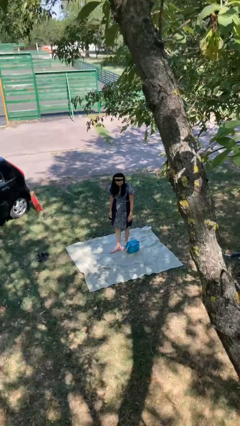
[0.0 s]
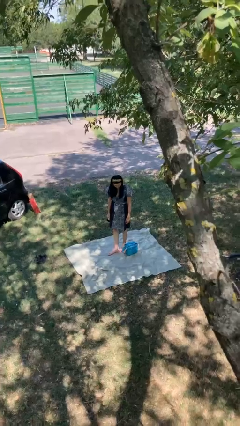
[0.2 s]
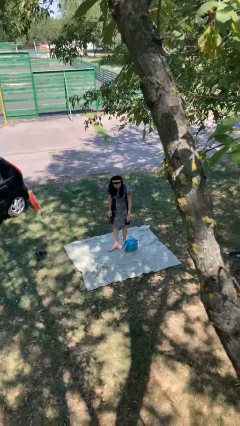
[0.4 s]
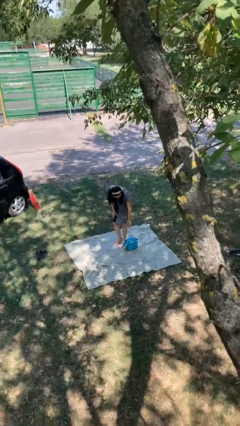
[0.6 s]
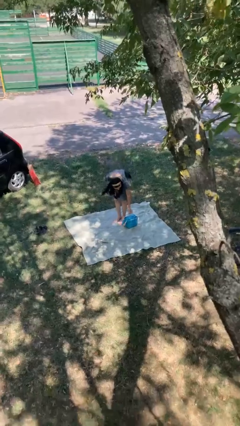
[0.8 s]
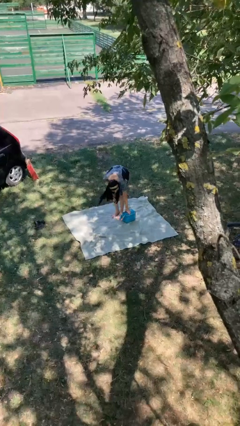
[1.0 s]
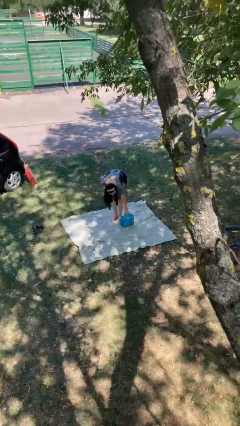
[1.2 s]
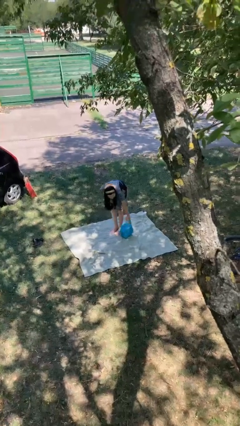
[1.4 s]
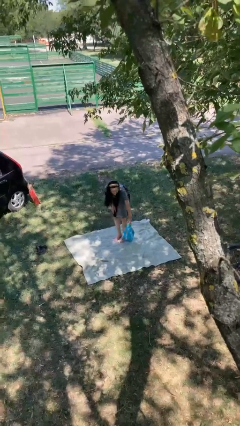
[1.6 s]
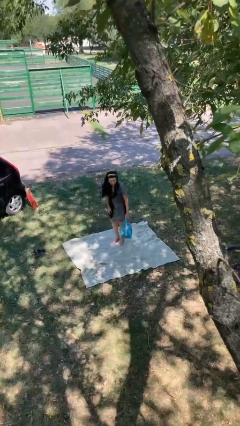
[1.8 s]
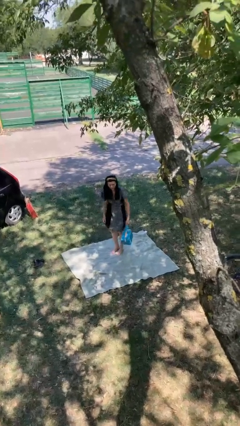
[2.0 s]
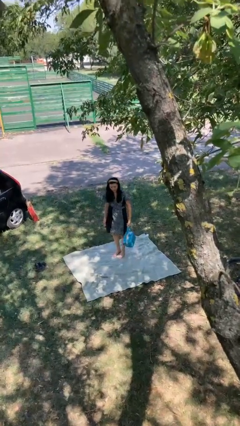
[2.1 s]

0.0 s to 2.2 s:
person picks up object from floor

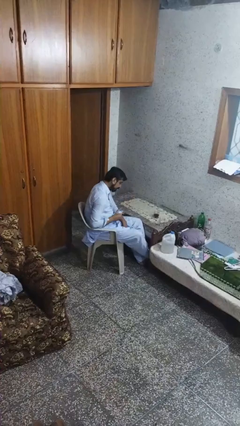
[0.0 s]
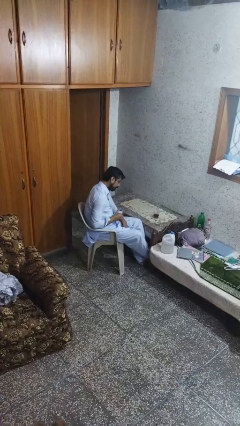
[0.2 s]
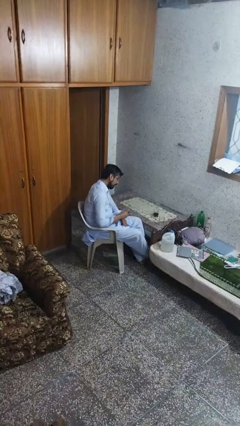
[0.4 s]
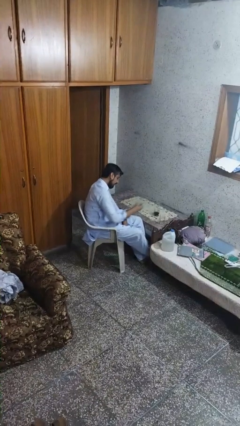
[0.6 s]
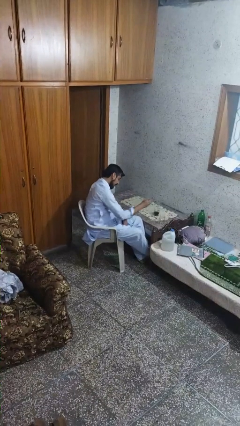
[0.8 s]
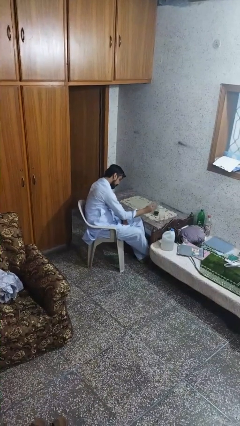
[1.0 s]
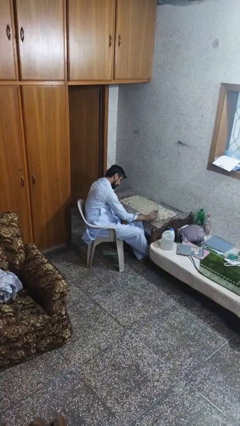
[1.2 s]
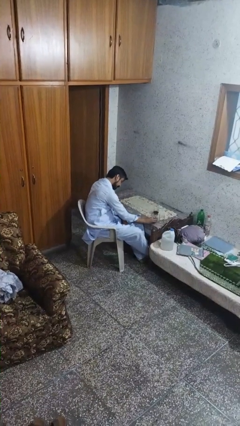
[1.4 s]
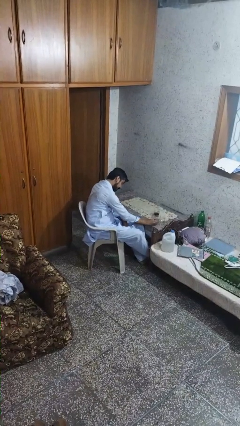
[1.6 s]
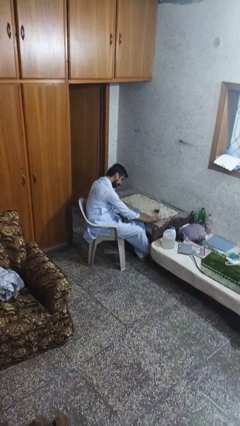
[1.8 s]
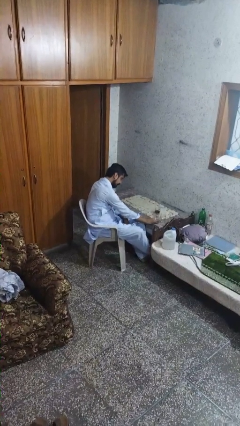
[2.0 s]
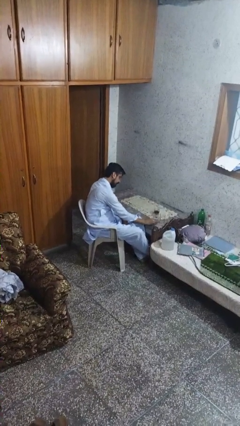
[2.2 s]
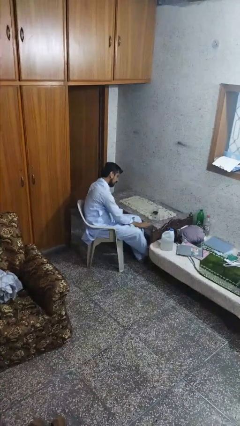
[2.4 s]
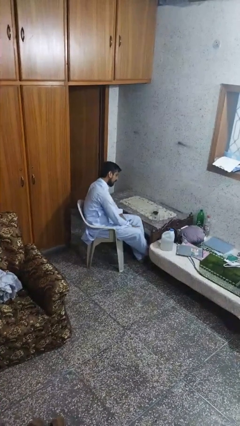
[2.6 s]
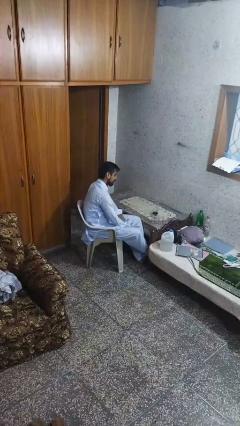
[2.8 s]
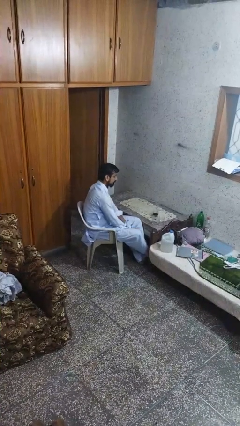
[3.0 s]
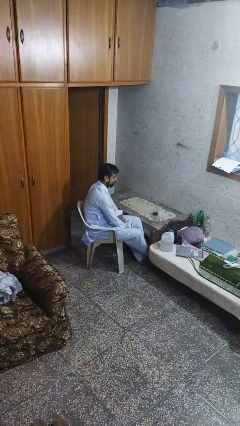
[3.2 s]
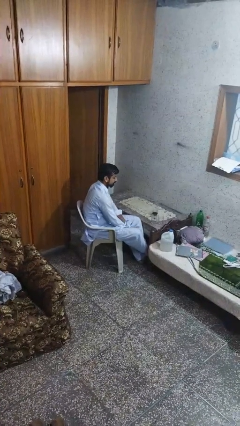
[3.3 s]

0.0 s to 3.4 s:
person puts down object on table

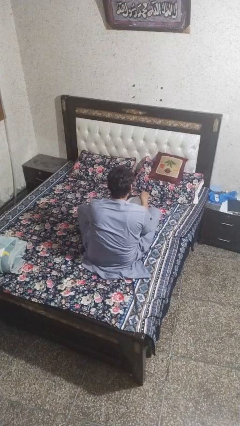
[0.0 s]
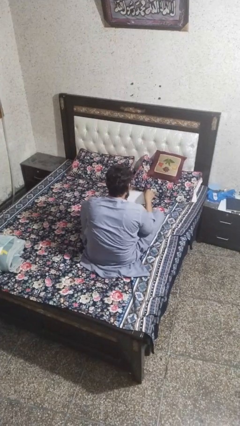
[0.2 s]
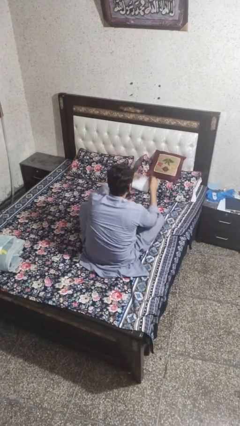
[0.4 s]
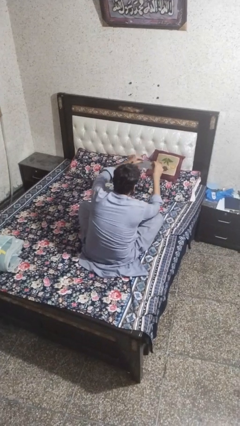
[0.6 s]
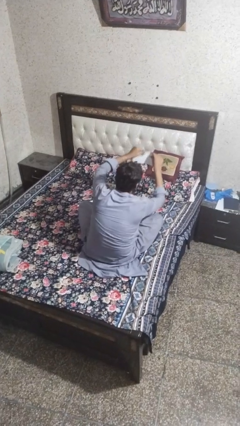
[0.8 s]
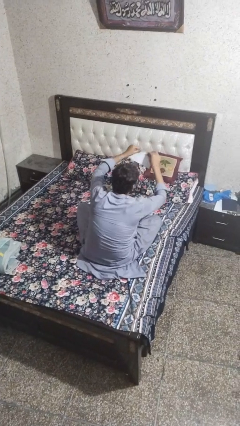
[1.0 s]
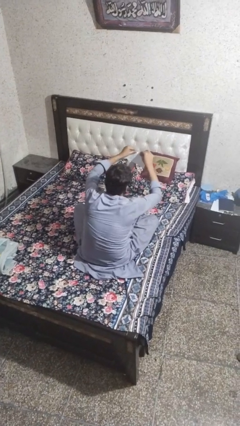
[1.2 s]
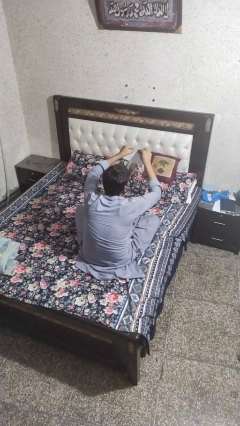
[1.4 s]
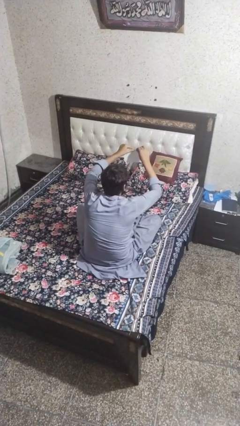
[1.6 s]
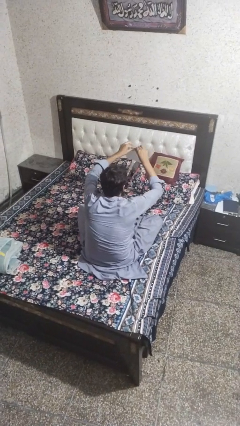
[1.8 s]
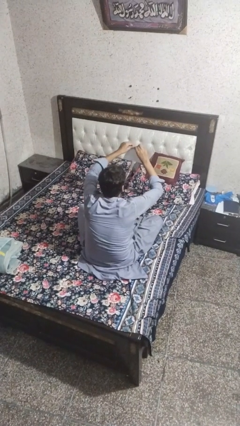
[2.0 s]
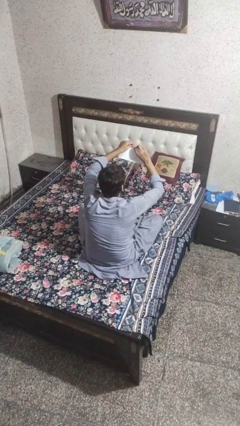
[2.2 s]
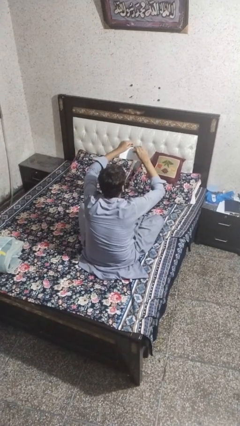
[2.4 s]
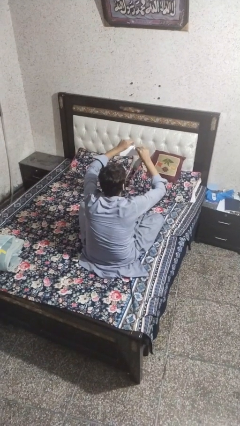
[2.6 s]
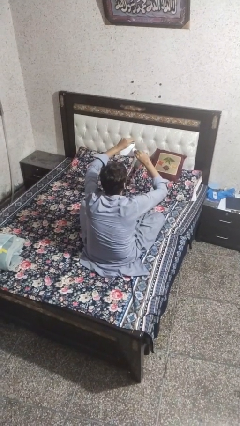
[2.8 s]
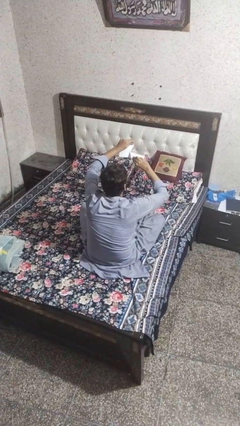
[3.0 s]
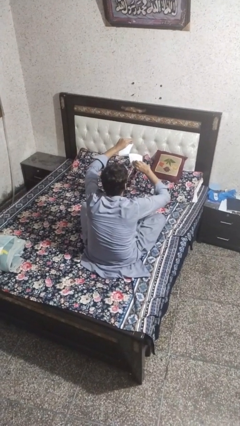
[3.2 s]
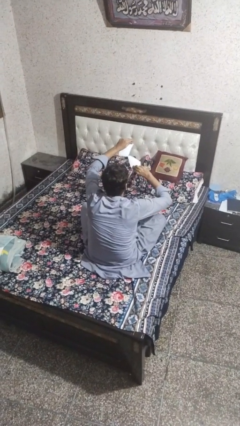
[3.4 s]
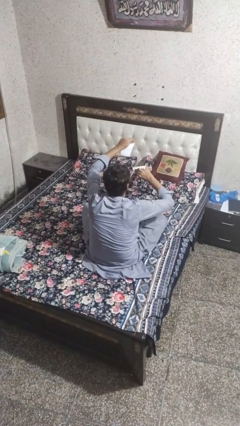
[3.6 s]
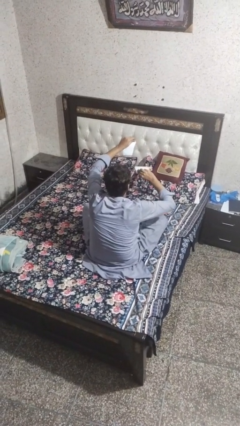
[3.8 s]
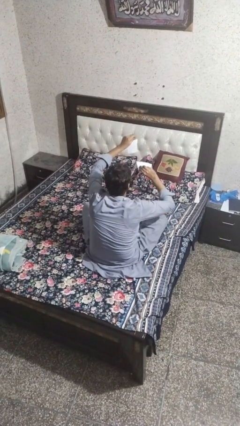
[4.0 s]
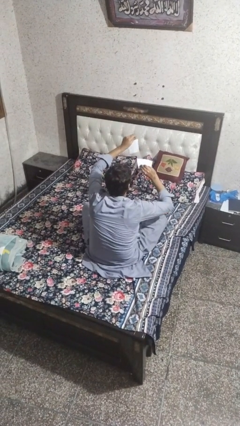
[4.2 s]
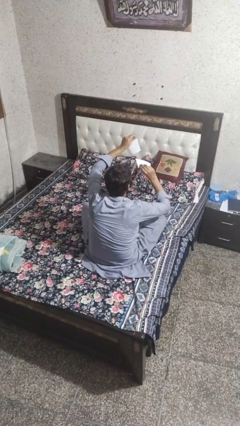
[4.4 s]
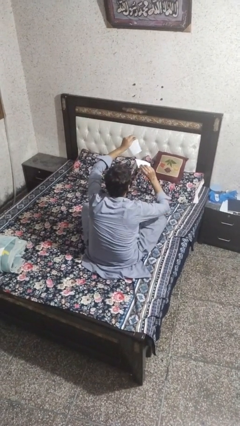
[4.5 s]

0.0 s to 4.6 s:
person tears paper

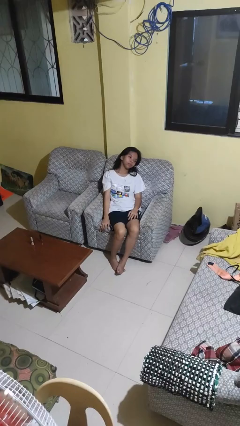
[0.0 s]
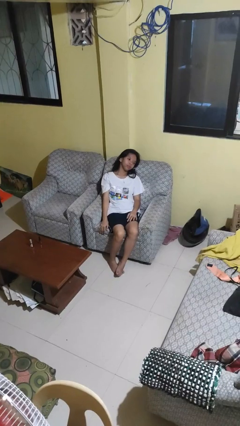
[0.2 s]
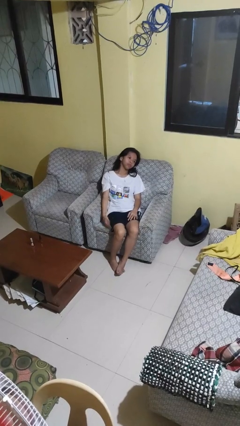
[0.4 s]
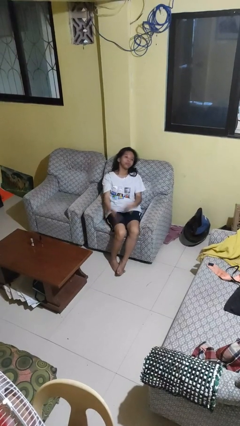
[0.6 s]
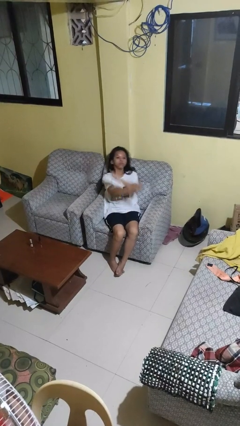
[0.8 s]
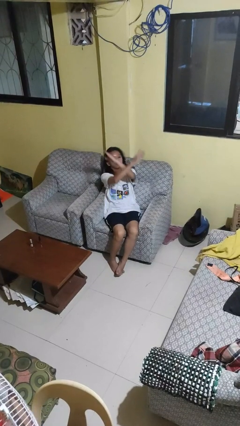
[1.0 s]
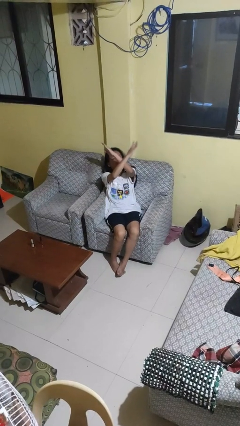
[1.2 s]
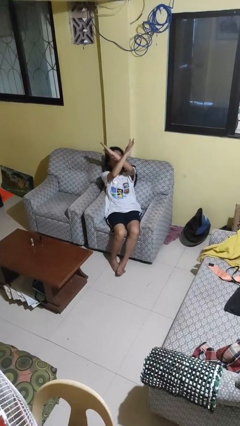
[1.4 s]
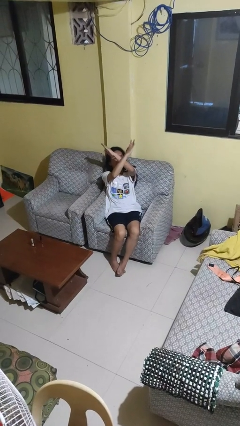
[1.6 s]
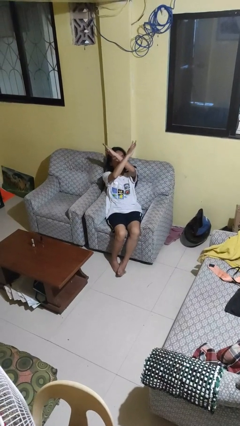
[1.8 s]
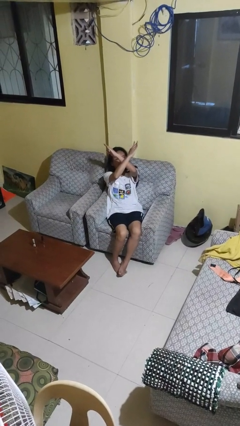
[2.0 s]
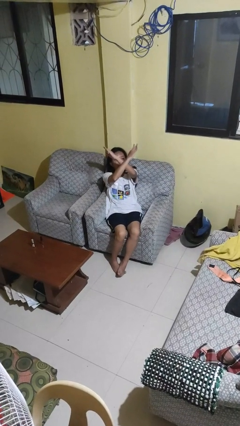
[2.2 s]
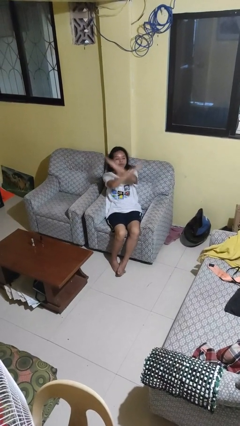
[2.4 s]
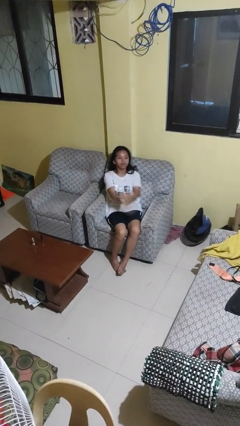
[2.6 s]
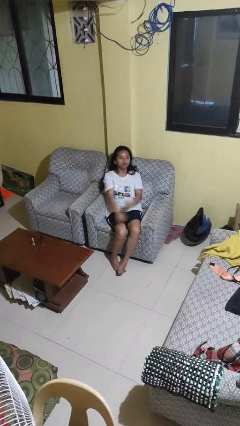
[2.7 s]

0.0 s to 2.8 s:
person gestures arms x

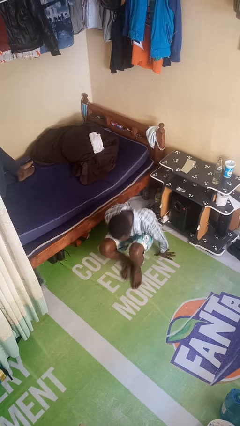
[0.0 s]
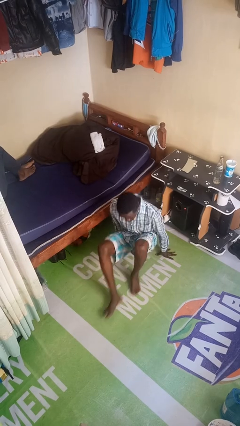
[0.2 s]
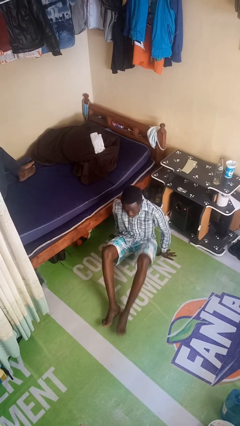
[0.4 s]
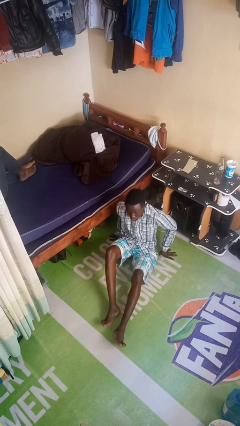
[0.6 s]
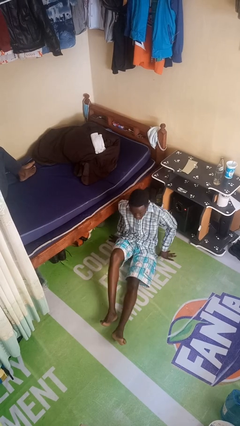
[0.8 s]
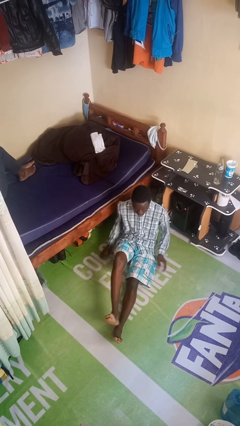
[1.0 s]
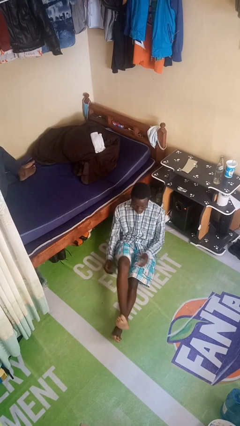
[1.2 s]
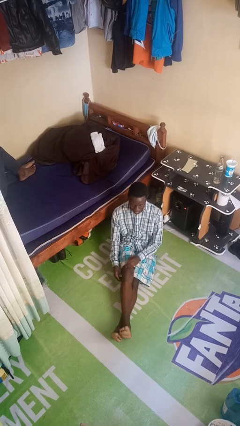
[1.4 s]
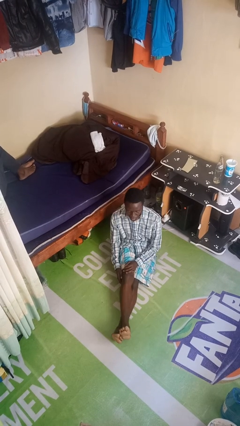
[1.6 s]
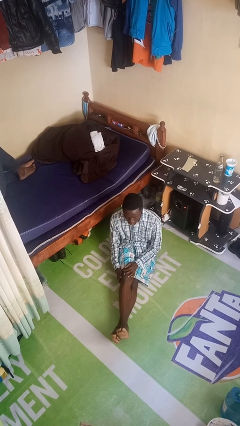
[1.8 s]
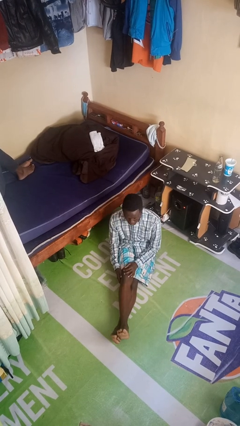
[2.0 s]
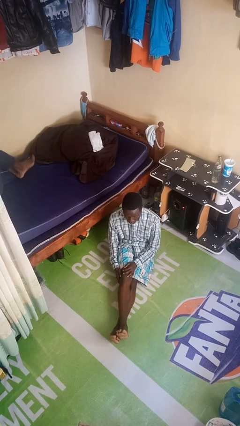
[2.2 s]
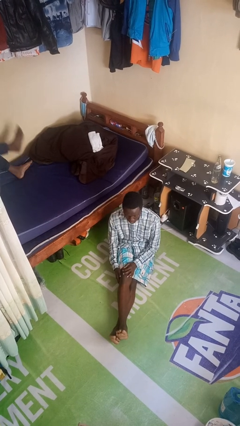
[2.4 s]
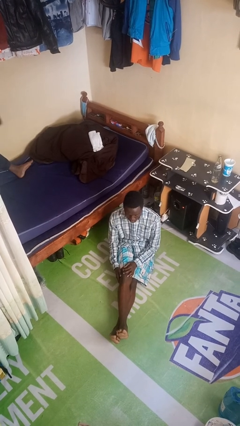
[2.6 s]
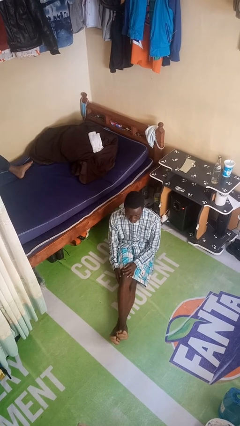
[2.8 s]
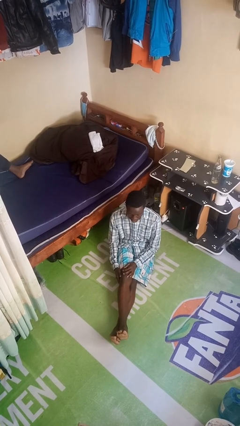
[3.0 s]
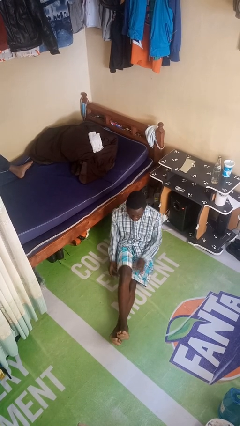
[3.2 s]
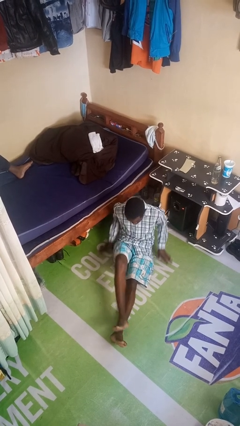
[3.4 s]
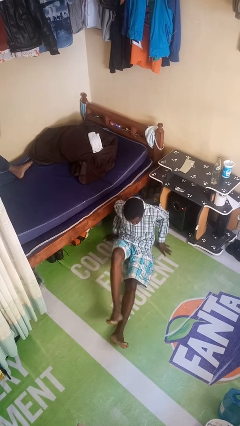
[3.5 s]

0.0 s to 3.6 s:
person sits crisscross

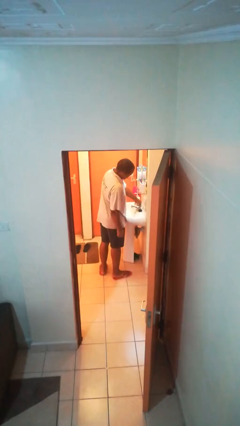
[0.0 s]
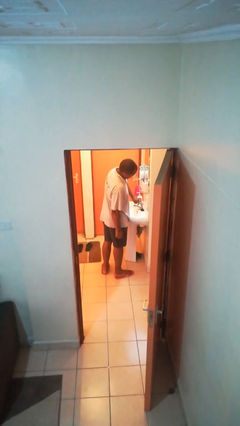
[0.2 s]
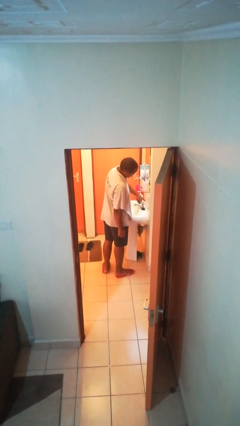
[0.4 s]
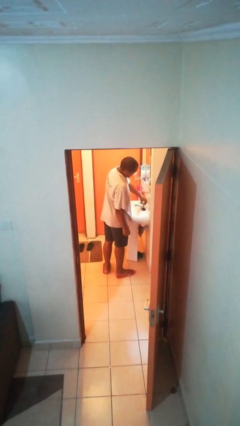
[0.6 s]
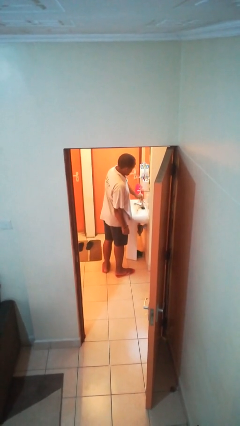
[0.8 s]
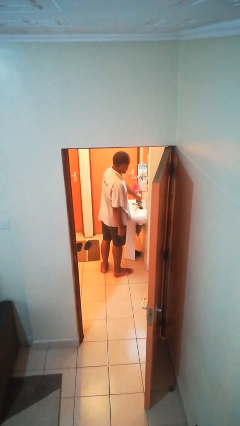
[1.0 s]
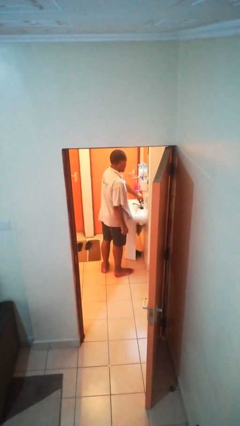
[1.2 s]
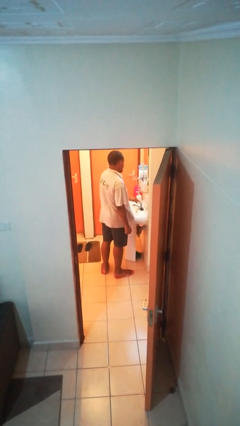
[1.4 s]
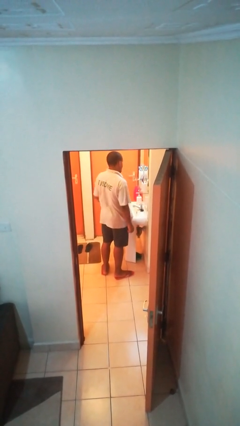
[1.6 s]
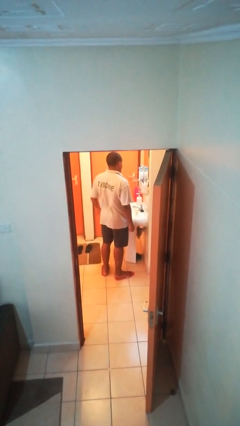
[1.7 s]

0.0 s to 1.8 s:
person turns off faucet
